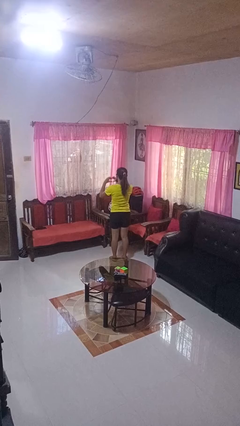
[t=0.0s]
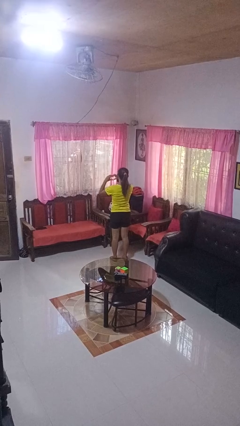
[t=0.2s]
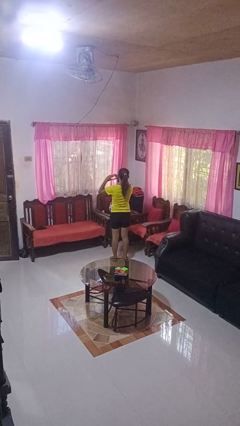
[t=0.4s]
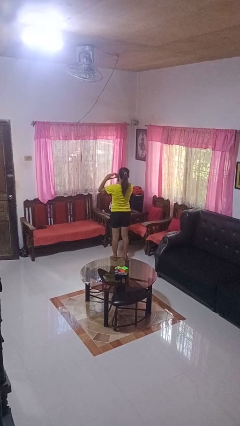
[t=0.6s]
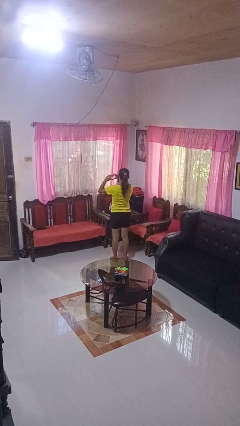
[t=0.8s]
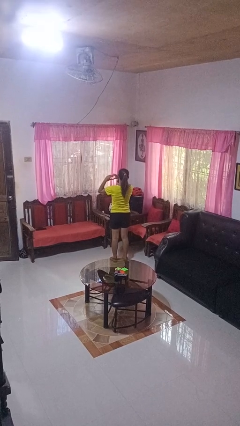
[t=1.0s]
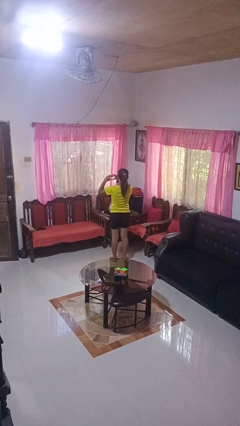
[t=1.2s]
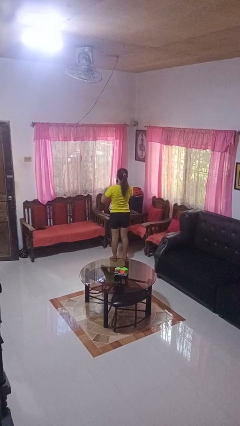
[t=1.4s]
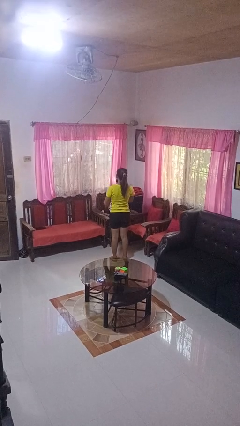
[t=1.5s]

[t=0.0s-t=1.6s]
person gestures heart

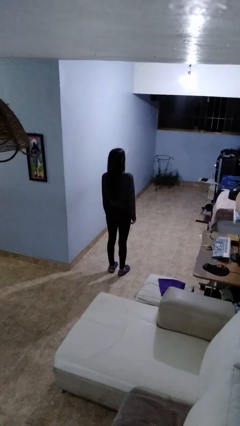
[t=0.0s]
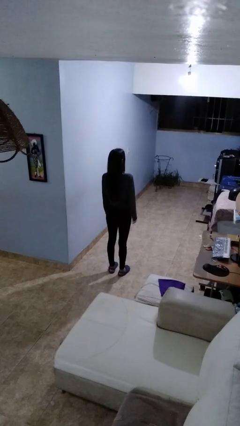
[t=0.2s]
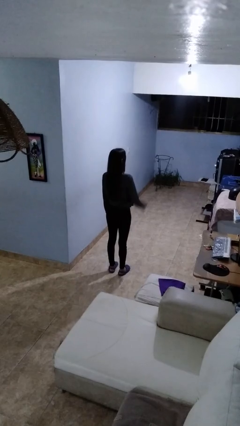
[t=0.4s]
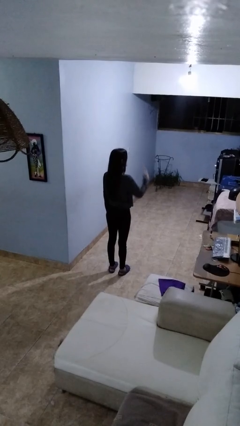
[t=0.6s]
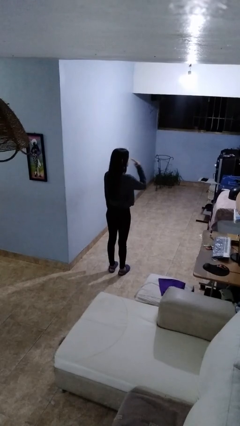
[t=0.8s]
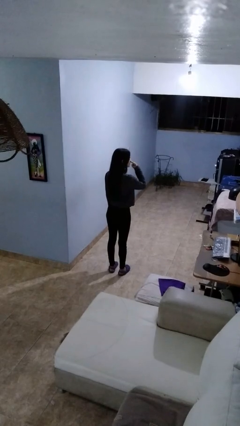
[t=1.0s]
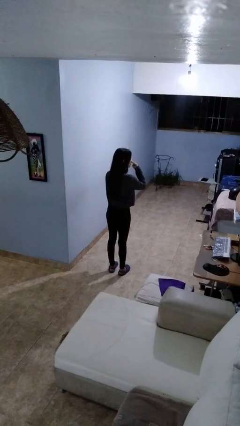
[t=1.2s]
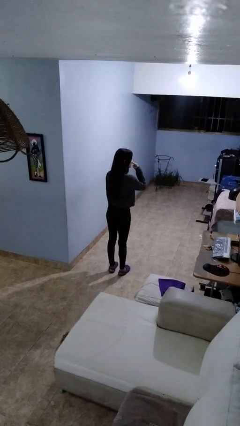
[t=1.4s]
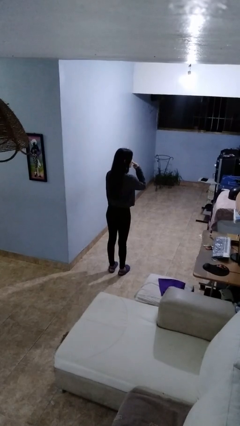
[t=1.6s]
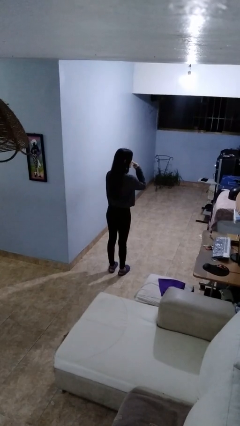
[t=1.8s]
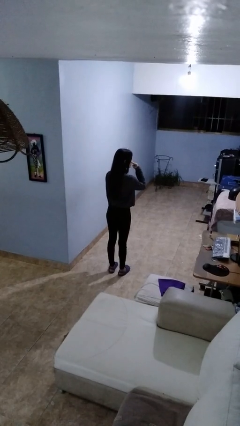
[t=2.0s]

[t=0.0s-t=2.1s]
person gestures watch closely

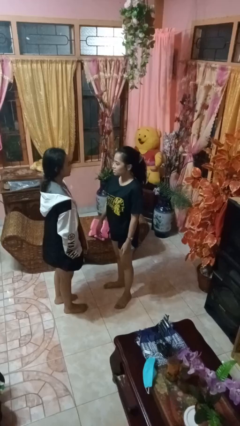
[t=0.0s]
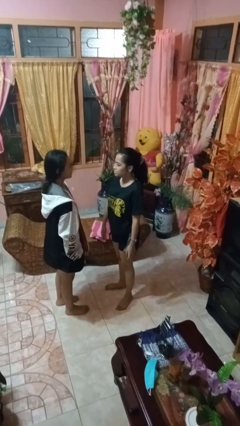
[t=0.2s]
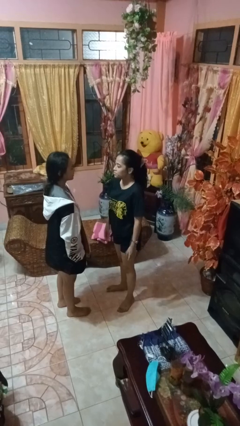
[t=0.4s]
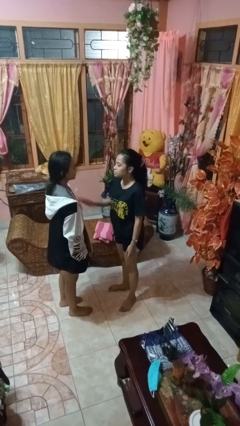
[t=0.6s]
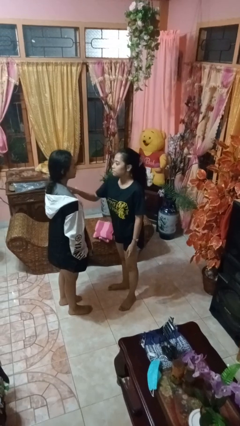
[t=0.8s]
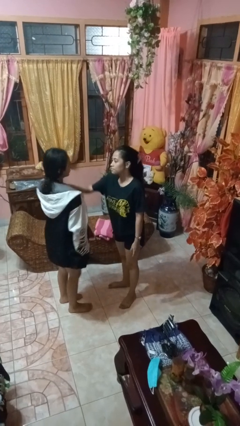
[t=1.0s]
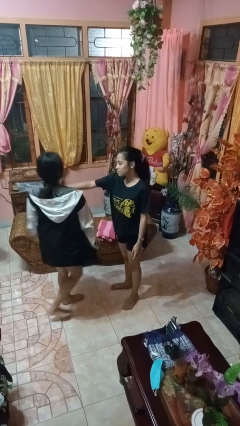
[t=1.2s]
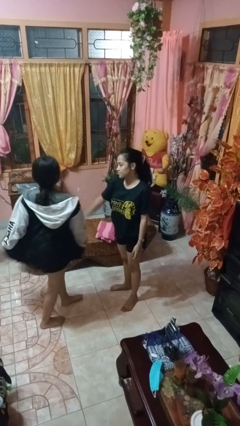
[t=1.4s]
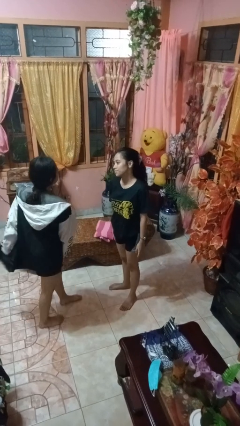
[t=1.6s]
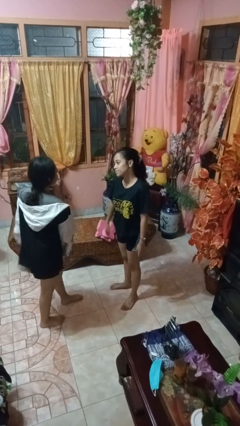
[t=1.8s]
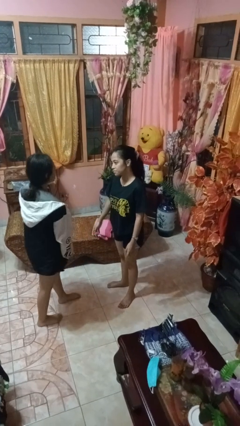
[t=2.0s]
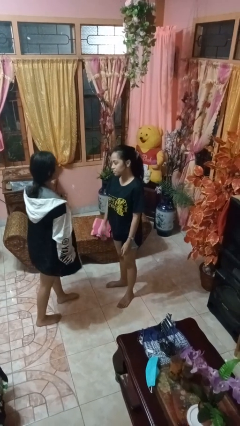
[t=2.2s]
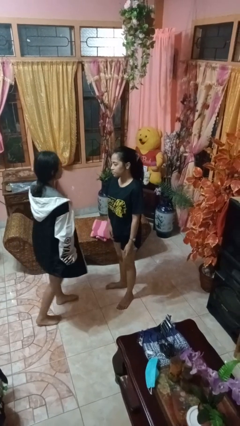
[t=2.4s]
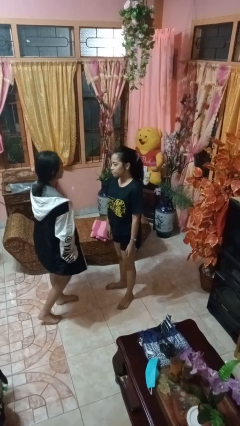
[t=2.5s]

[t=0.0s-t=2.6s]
person shoves person

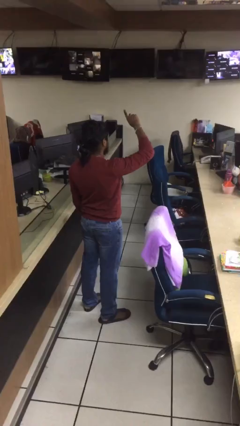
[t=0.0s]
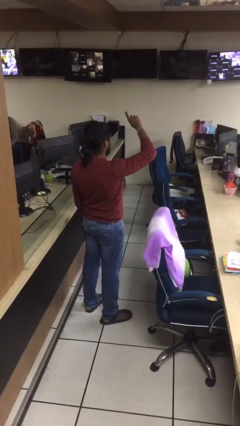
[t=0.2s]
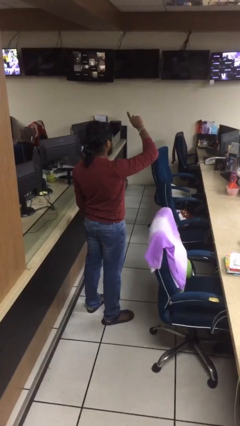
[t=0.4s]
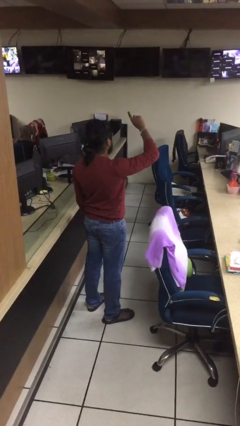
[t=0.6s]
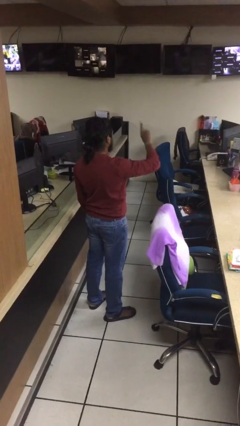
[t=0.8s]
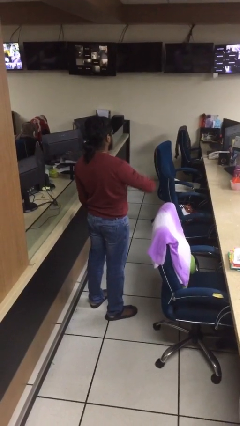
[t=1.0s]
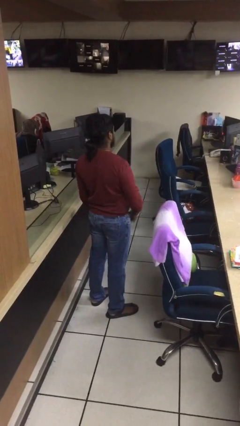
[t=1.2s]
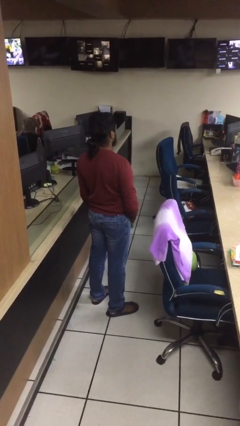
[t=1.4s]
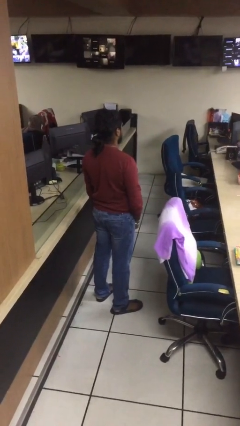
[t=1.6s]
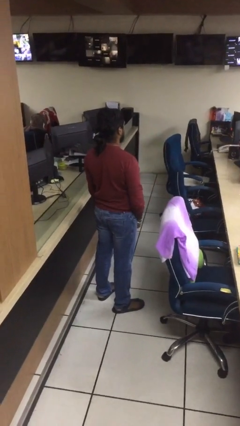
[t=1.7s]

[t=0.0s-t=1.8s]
person gestures swipe down

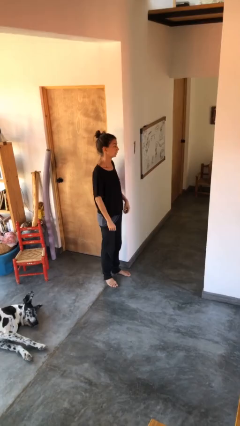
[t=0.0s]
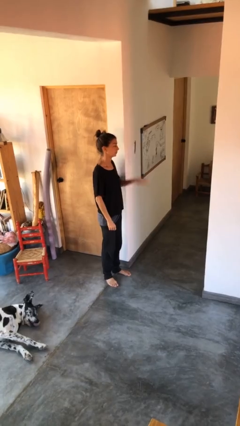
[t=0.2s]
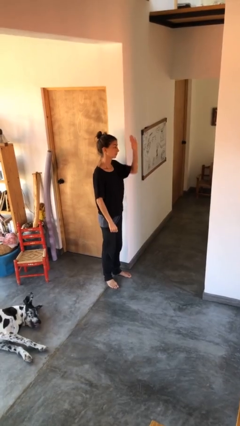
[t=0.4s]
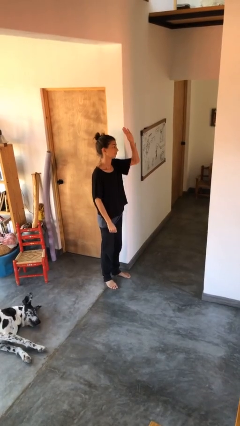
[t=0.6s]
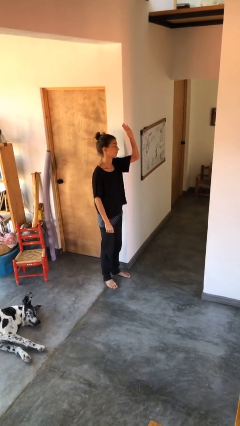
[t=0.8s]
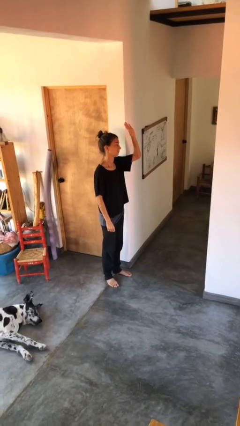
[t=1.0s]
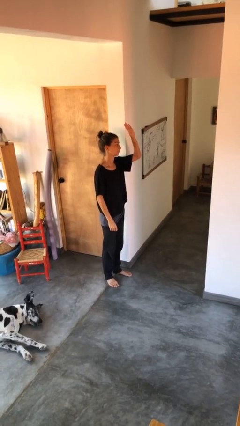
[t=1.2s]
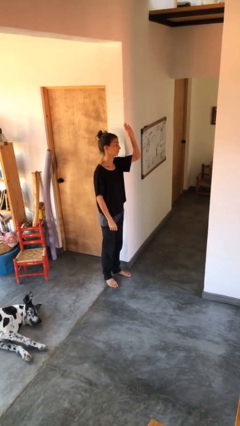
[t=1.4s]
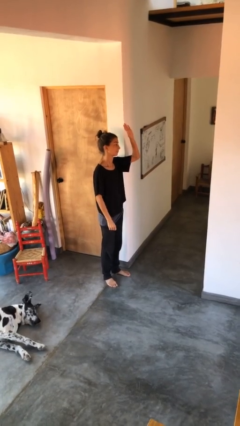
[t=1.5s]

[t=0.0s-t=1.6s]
person gestures raise hand

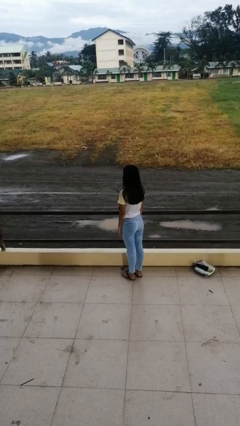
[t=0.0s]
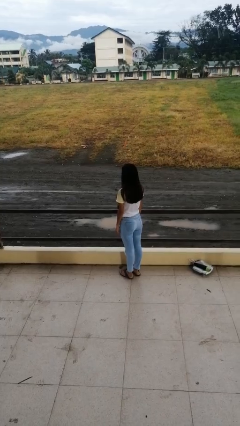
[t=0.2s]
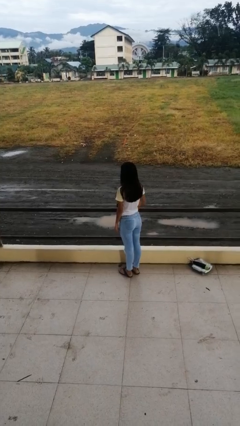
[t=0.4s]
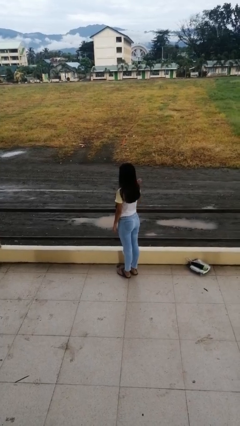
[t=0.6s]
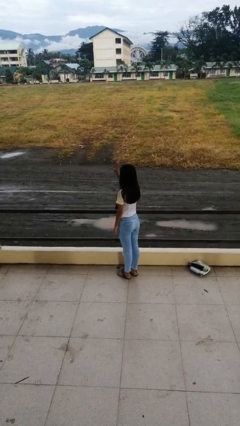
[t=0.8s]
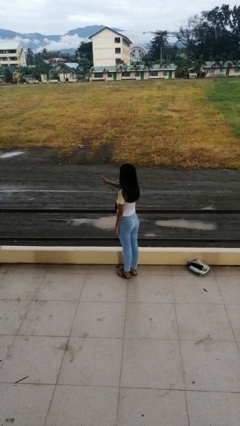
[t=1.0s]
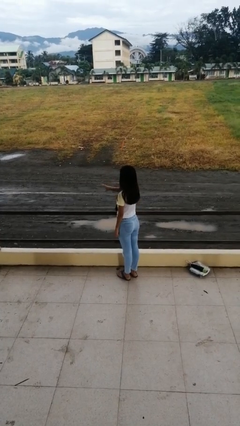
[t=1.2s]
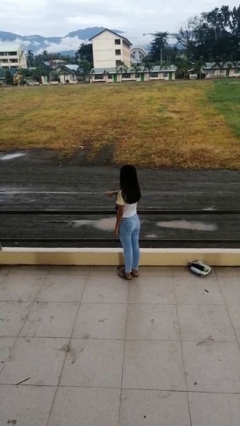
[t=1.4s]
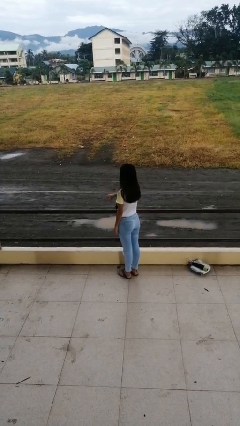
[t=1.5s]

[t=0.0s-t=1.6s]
person gestures swipe left

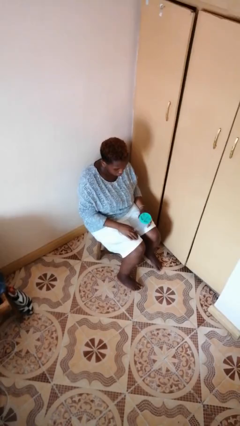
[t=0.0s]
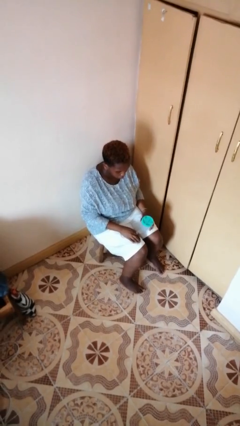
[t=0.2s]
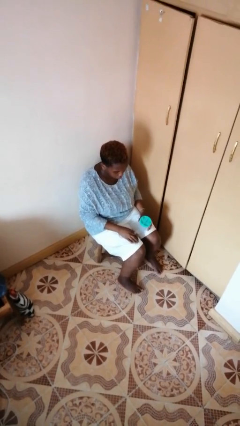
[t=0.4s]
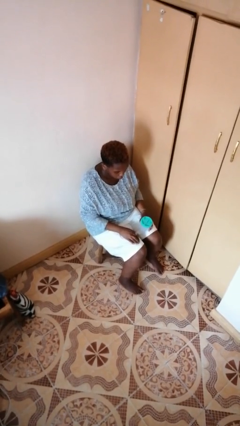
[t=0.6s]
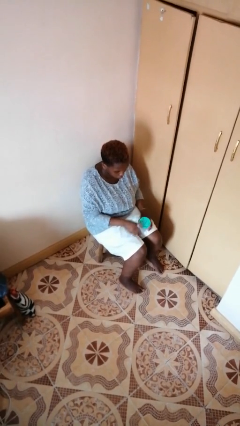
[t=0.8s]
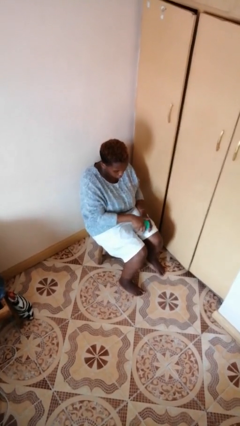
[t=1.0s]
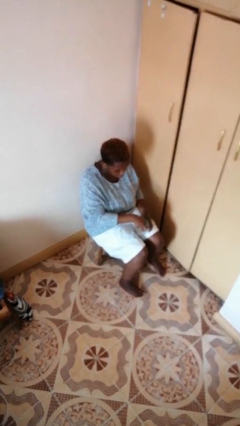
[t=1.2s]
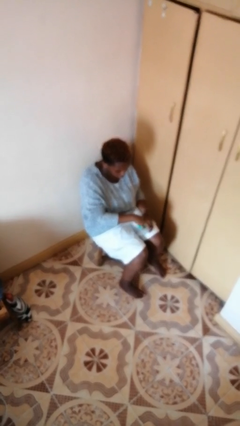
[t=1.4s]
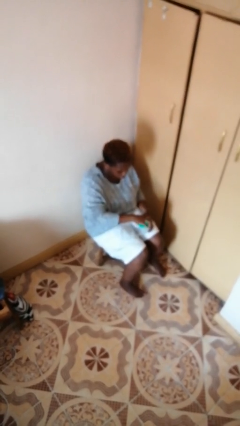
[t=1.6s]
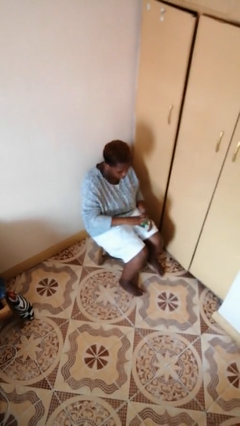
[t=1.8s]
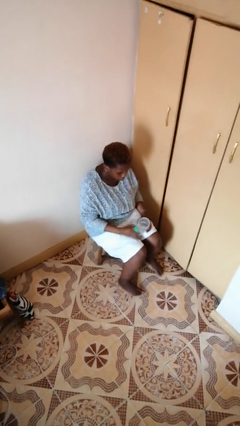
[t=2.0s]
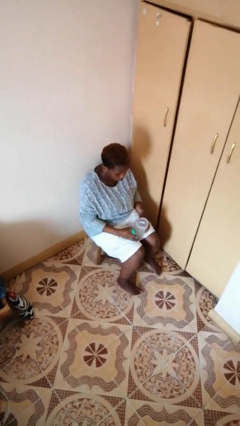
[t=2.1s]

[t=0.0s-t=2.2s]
person opens jar

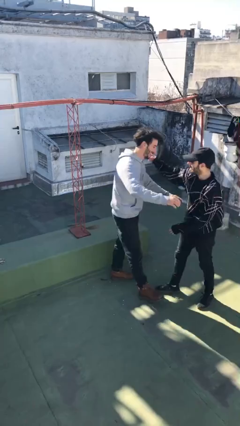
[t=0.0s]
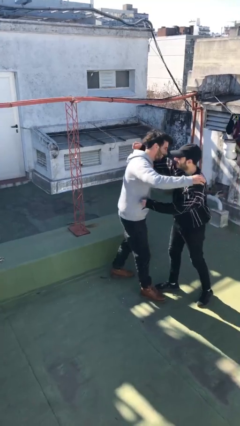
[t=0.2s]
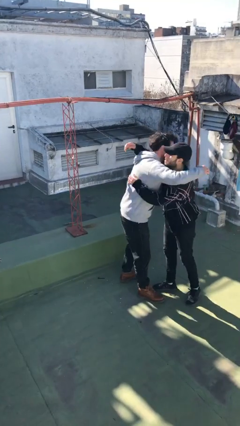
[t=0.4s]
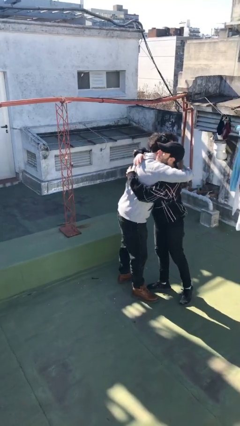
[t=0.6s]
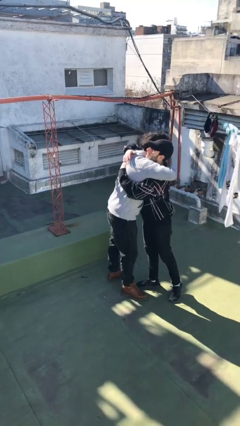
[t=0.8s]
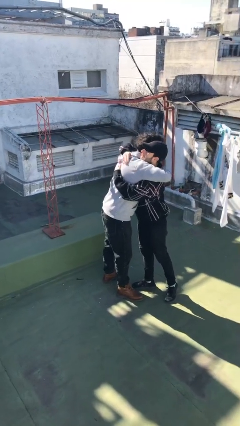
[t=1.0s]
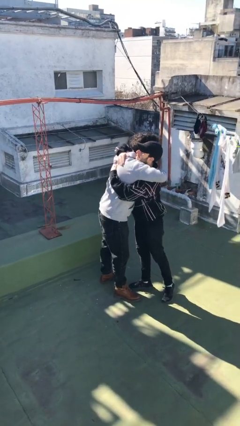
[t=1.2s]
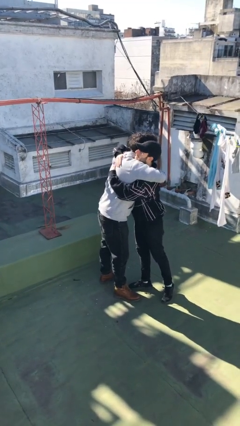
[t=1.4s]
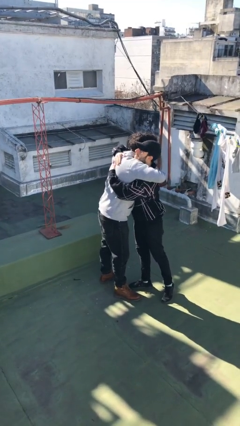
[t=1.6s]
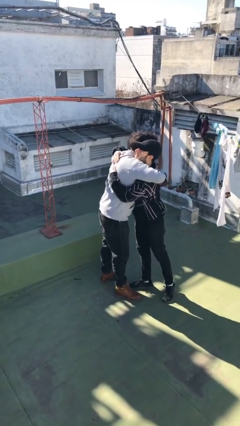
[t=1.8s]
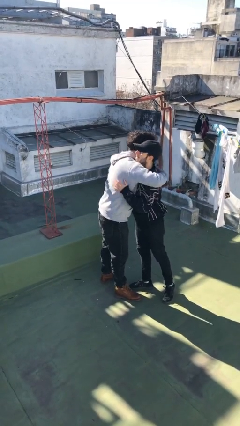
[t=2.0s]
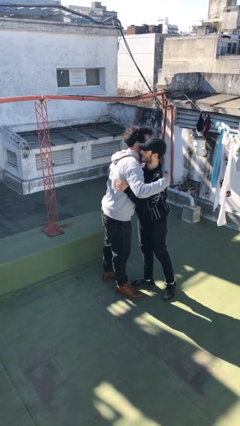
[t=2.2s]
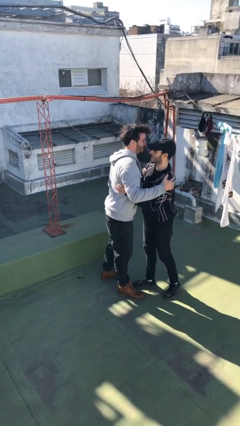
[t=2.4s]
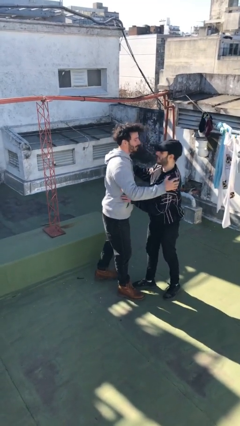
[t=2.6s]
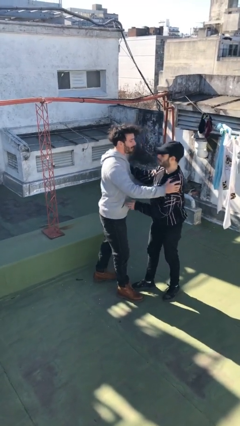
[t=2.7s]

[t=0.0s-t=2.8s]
person embraces person

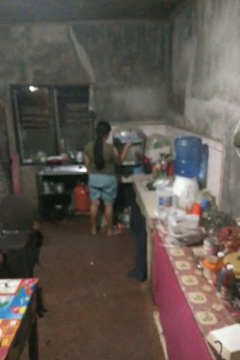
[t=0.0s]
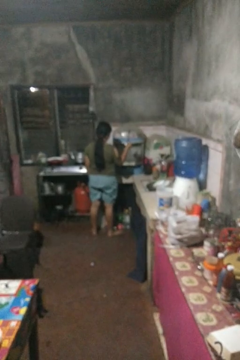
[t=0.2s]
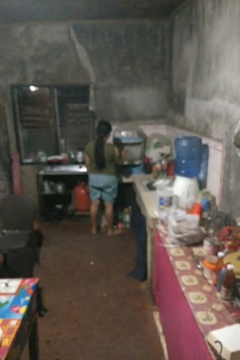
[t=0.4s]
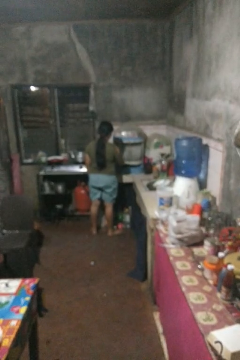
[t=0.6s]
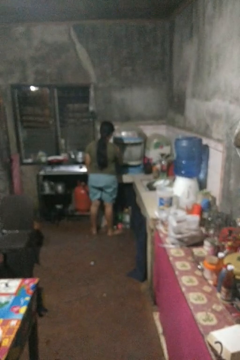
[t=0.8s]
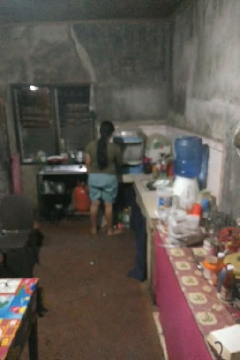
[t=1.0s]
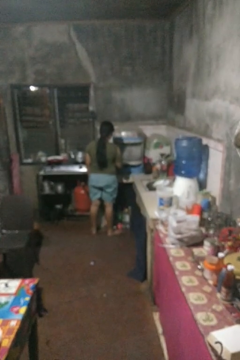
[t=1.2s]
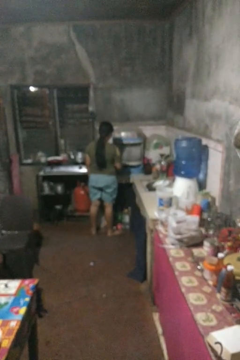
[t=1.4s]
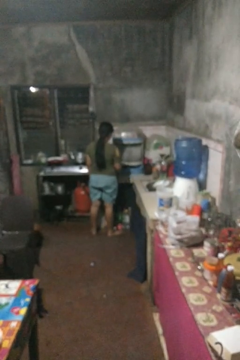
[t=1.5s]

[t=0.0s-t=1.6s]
person puts object into kitchen drawer
